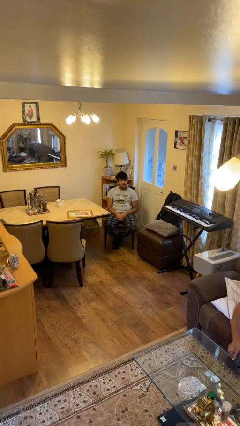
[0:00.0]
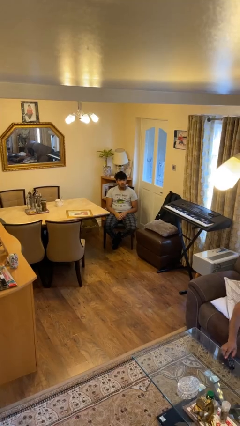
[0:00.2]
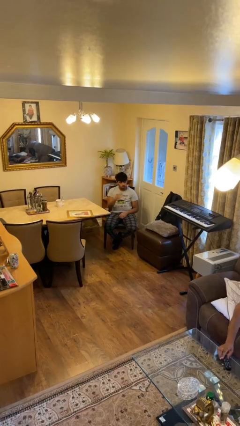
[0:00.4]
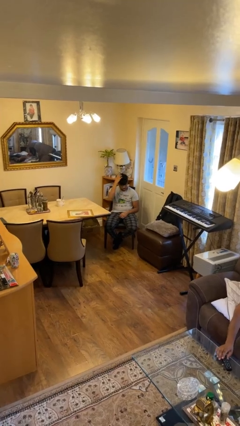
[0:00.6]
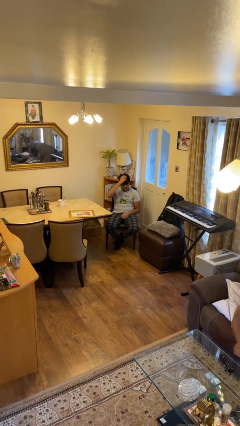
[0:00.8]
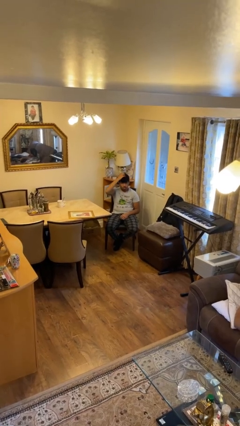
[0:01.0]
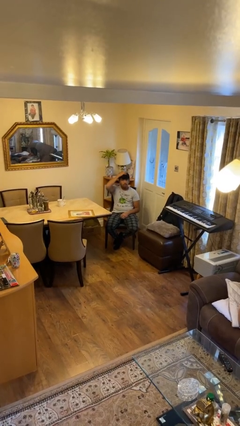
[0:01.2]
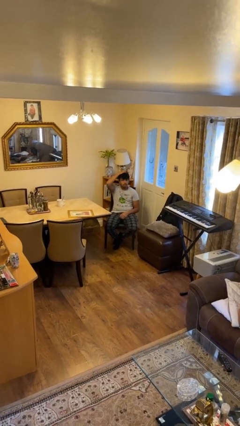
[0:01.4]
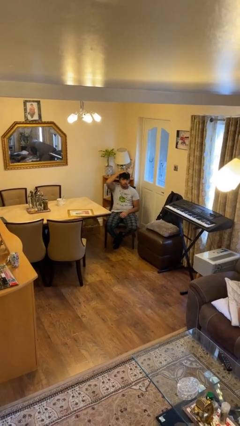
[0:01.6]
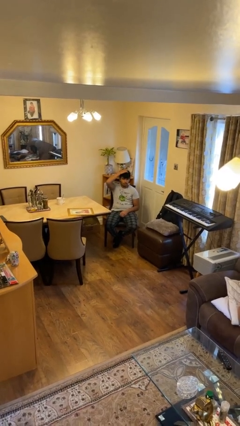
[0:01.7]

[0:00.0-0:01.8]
person strokes hair

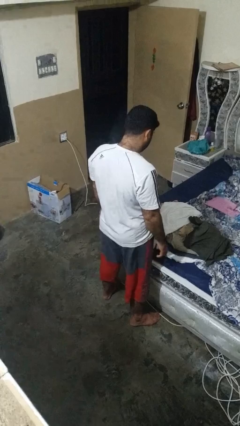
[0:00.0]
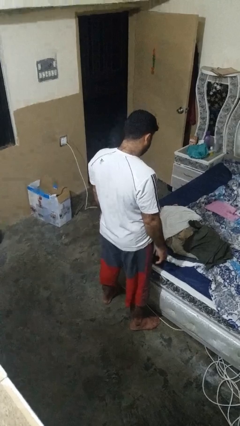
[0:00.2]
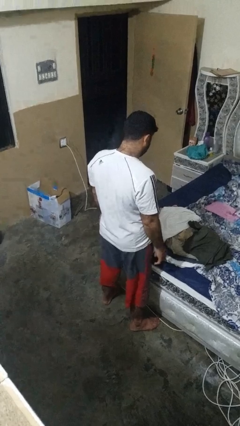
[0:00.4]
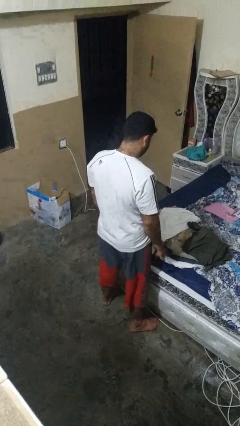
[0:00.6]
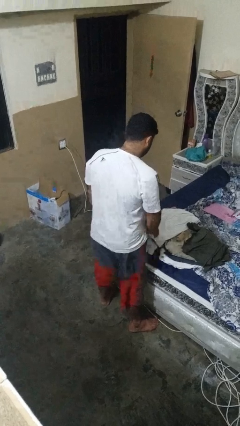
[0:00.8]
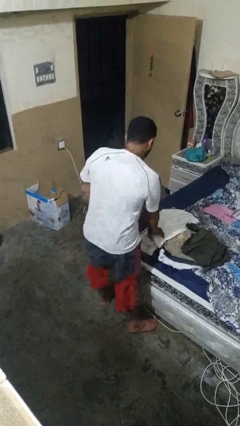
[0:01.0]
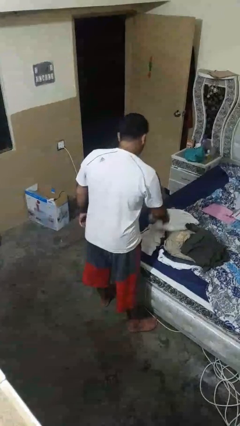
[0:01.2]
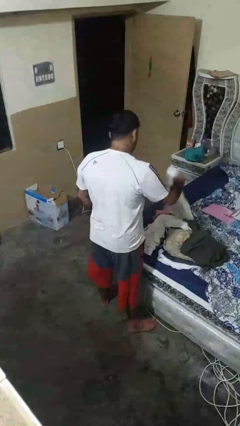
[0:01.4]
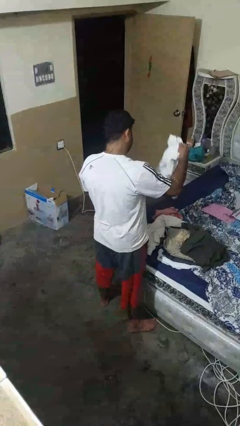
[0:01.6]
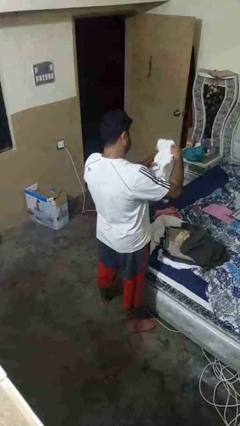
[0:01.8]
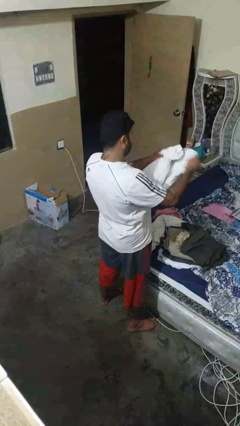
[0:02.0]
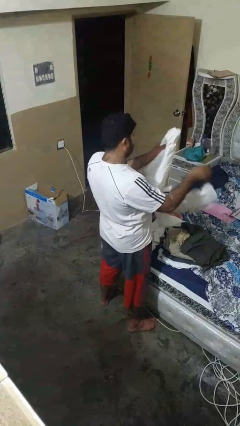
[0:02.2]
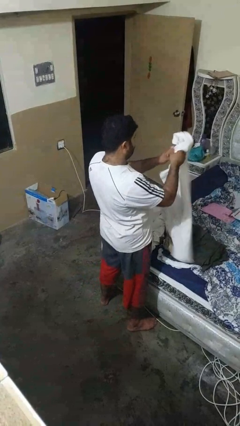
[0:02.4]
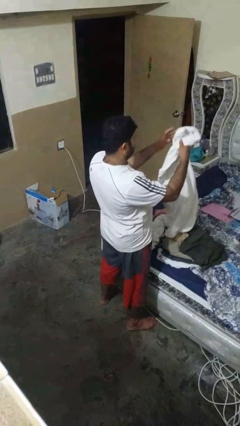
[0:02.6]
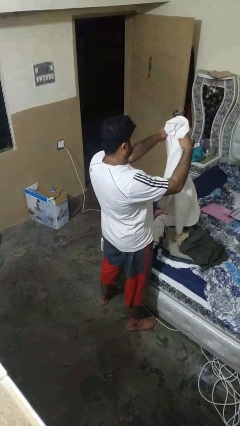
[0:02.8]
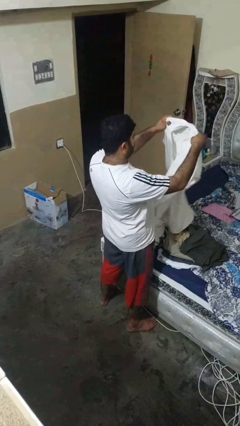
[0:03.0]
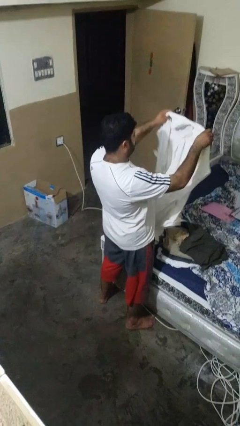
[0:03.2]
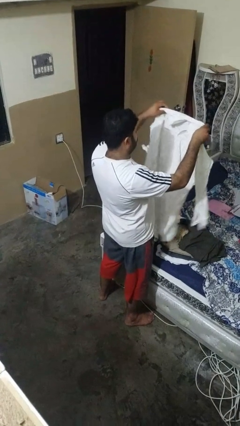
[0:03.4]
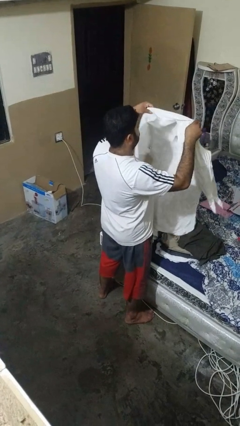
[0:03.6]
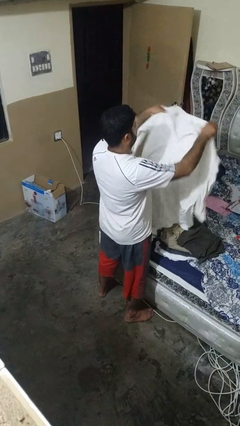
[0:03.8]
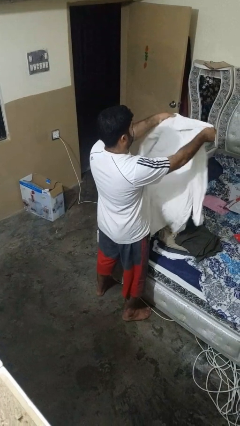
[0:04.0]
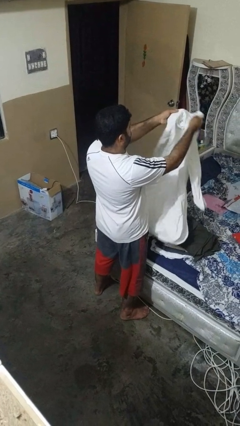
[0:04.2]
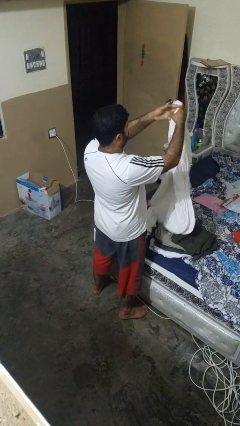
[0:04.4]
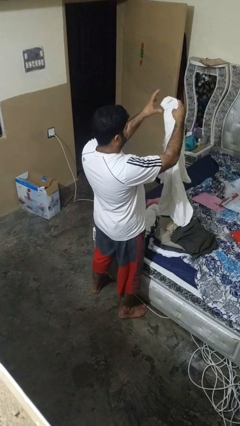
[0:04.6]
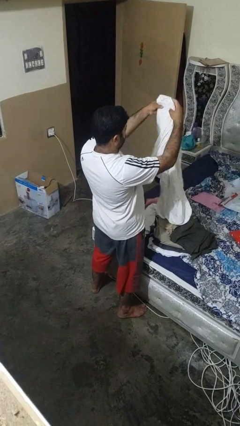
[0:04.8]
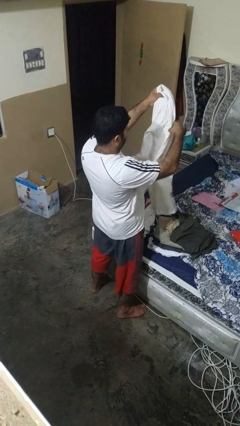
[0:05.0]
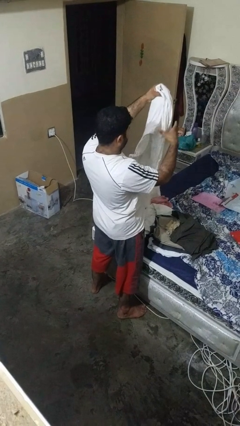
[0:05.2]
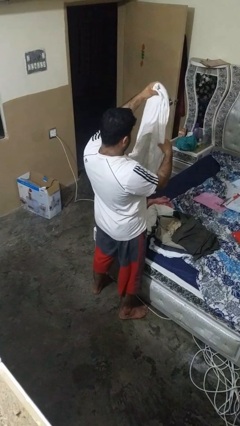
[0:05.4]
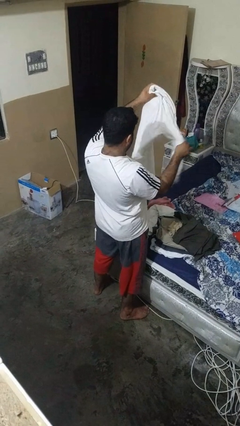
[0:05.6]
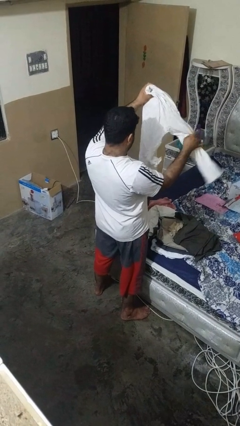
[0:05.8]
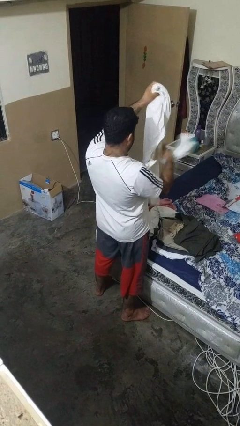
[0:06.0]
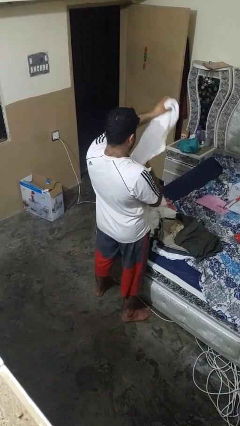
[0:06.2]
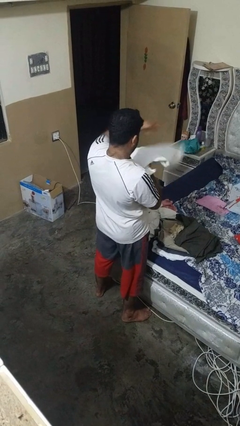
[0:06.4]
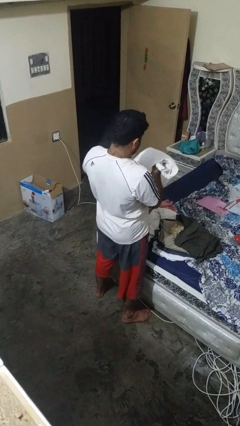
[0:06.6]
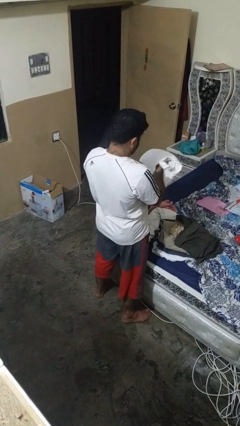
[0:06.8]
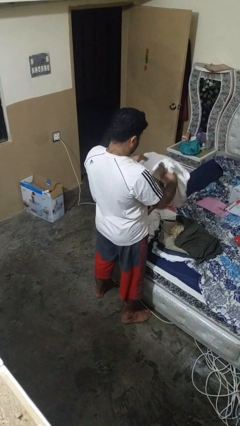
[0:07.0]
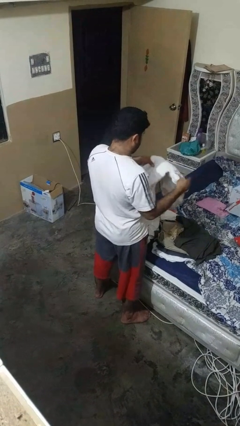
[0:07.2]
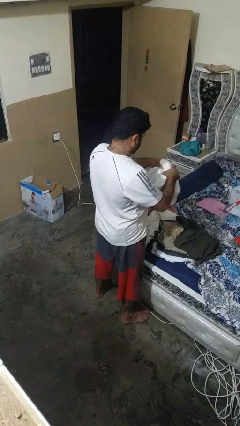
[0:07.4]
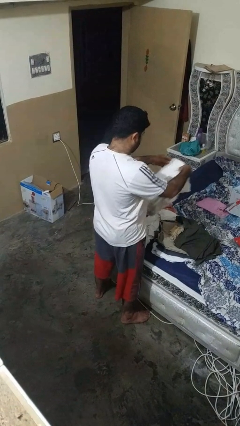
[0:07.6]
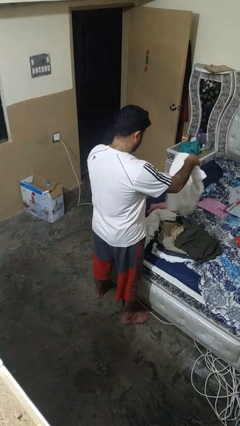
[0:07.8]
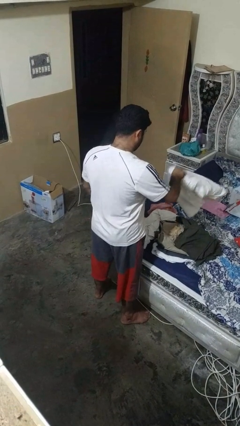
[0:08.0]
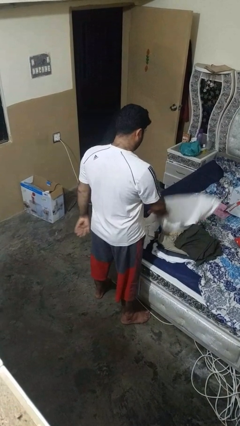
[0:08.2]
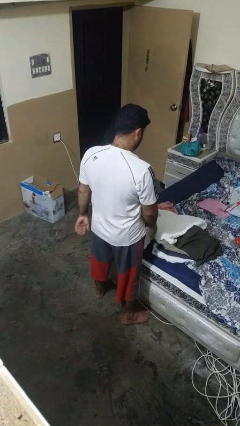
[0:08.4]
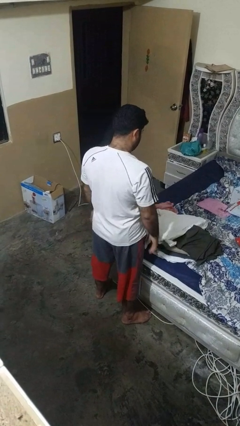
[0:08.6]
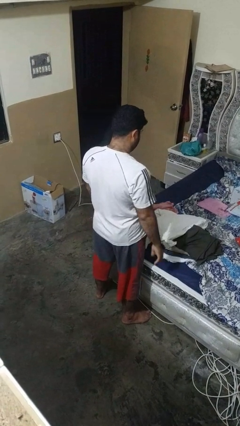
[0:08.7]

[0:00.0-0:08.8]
person folds shirt

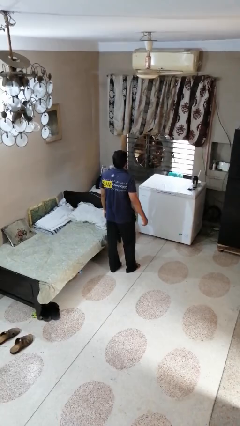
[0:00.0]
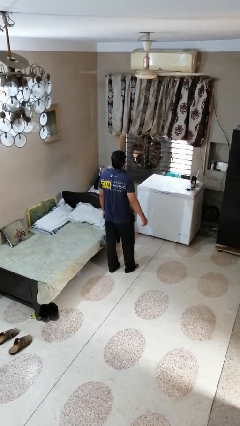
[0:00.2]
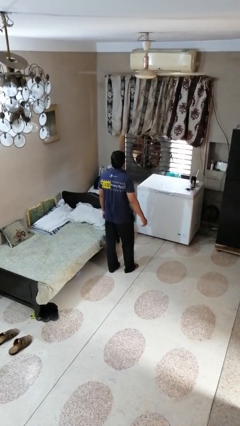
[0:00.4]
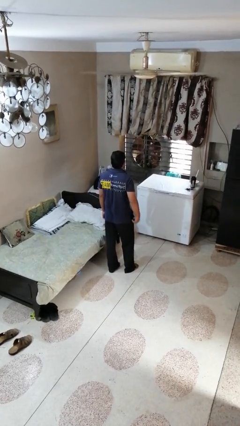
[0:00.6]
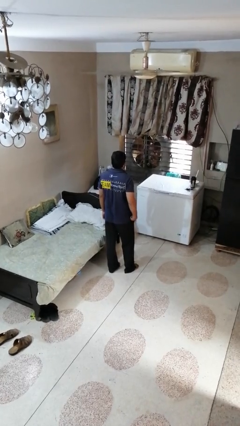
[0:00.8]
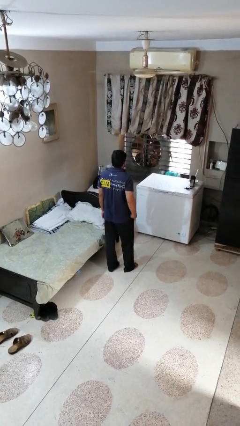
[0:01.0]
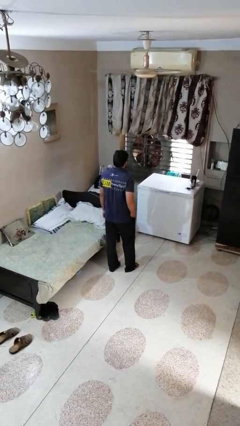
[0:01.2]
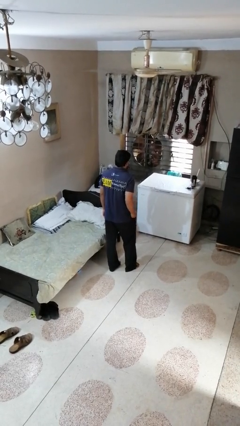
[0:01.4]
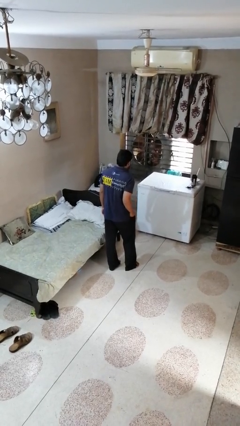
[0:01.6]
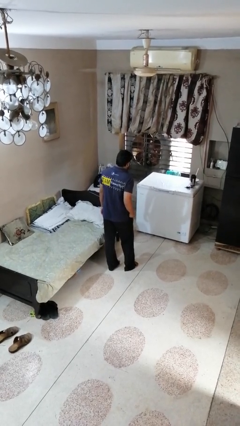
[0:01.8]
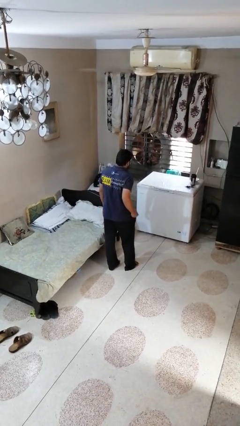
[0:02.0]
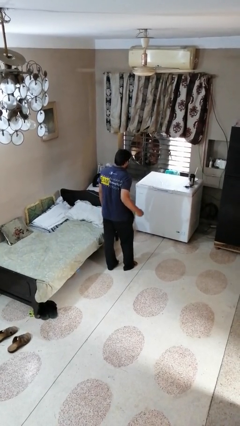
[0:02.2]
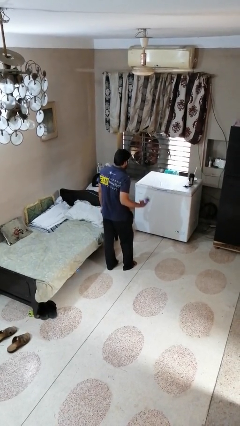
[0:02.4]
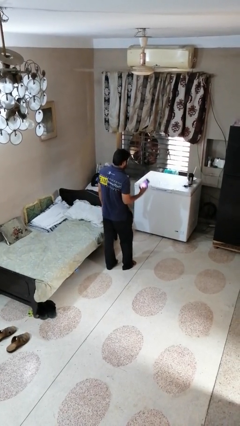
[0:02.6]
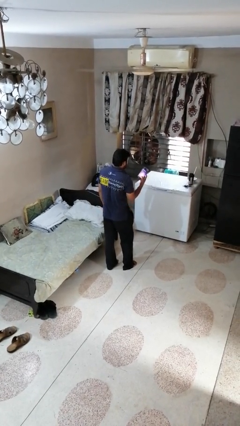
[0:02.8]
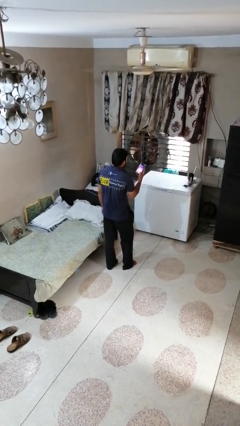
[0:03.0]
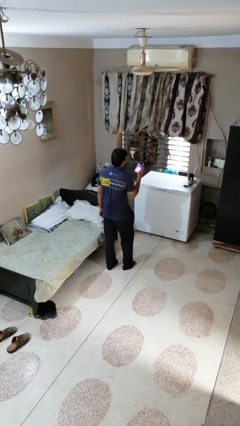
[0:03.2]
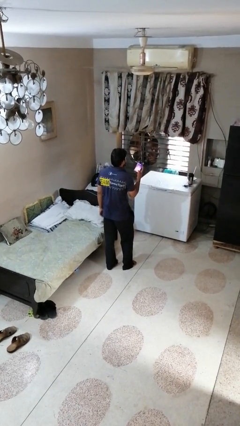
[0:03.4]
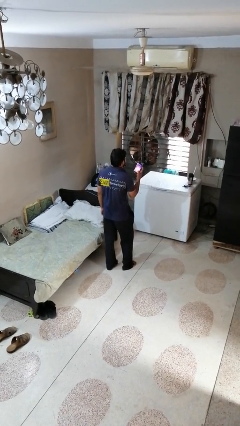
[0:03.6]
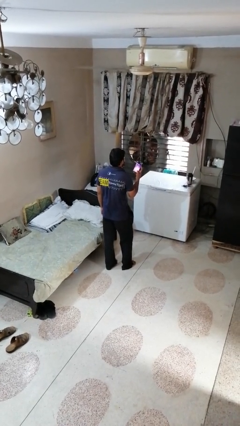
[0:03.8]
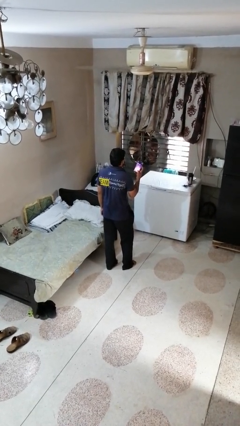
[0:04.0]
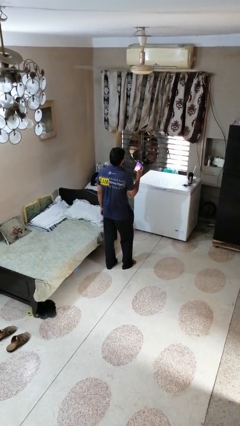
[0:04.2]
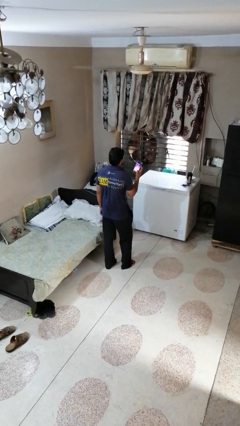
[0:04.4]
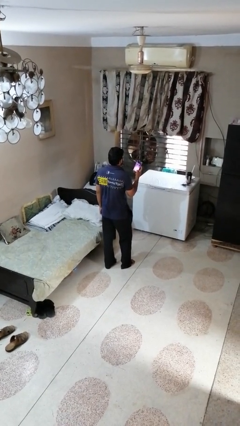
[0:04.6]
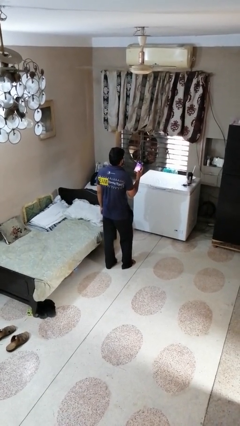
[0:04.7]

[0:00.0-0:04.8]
person takes phone from pocket

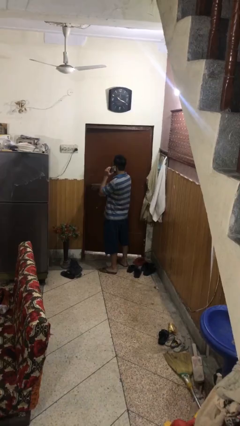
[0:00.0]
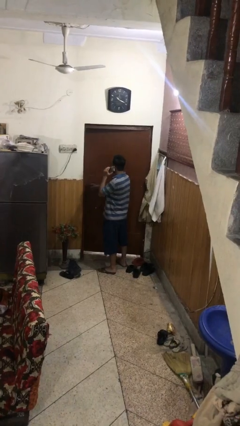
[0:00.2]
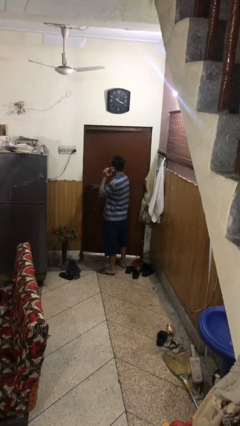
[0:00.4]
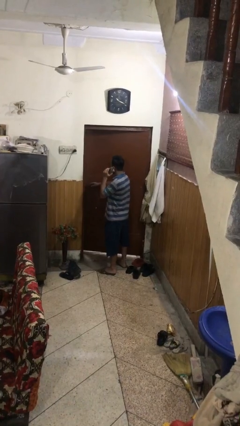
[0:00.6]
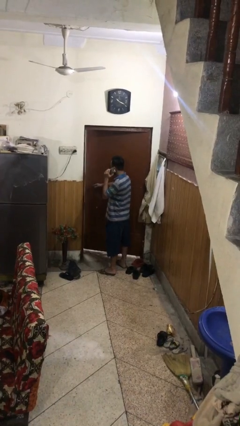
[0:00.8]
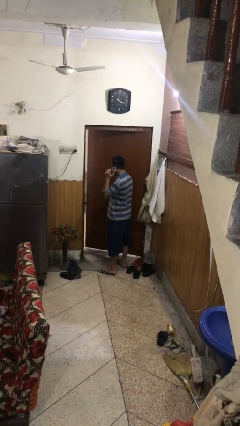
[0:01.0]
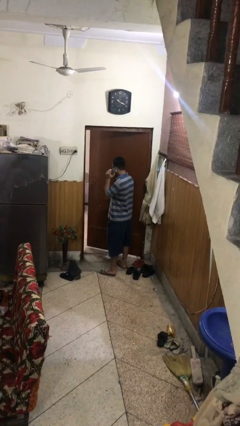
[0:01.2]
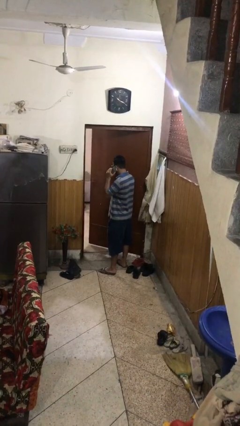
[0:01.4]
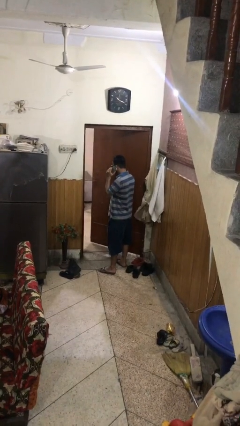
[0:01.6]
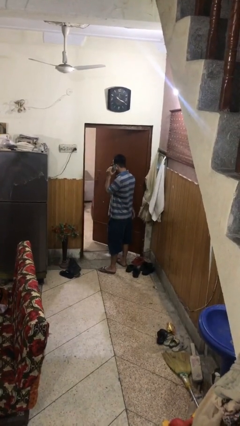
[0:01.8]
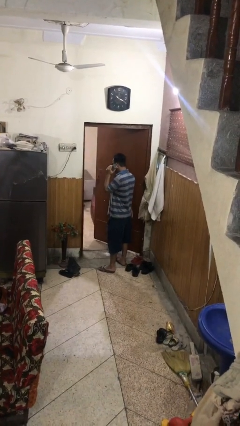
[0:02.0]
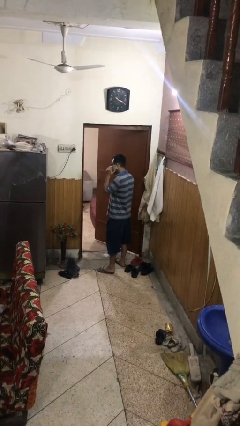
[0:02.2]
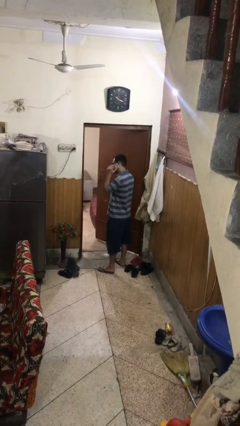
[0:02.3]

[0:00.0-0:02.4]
person opens facility door
